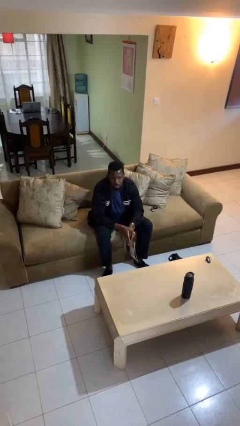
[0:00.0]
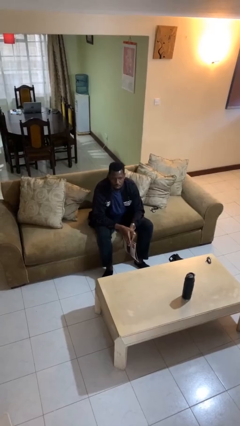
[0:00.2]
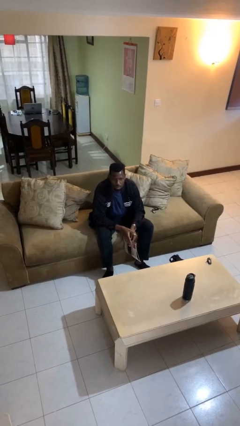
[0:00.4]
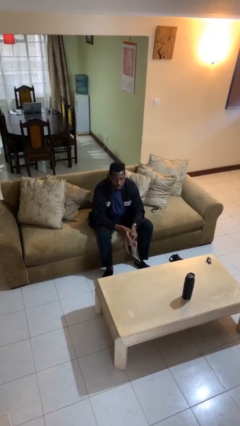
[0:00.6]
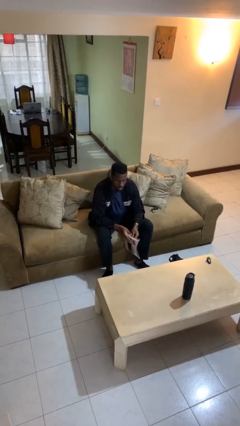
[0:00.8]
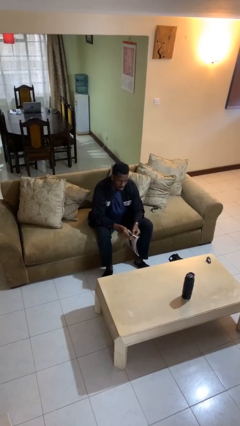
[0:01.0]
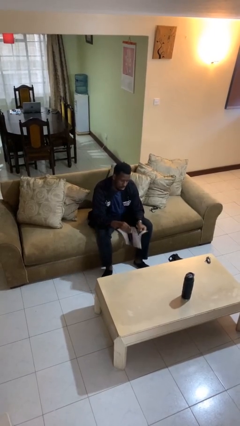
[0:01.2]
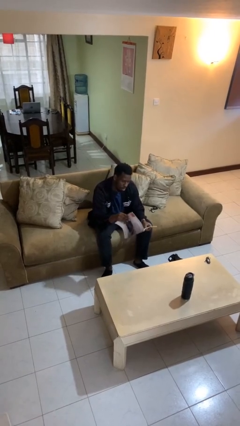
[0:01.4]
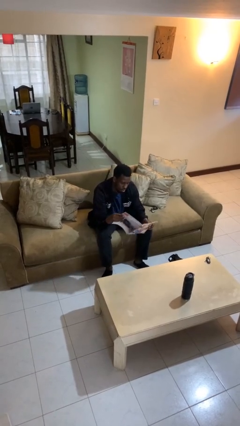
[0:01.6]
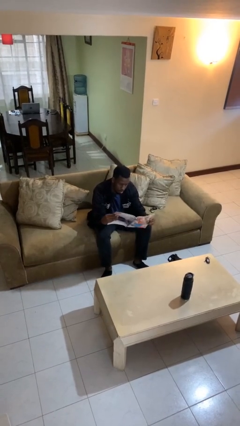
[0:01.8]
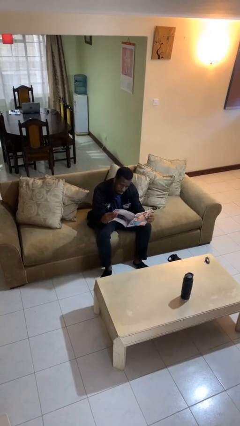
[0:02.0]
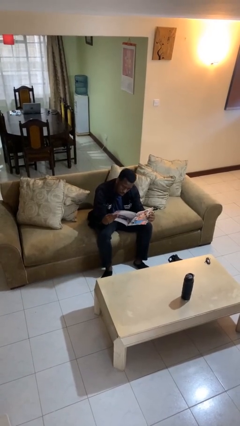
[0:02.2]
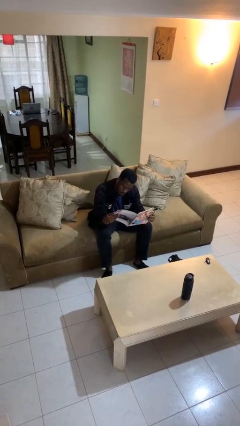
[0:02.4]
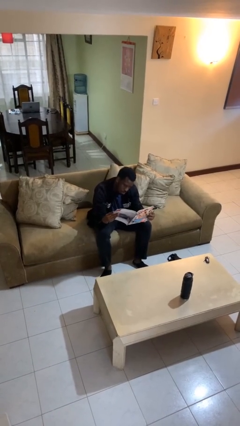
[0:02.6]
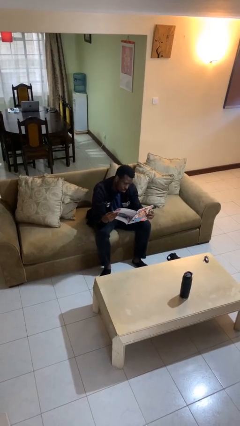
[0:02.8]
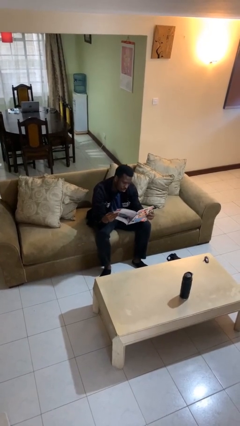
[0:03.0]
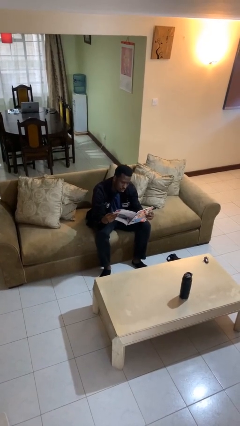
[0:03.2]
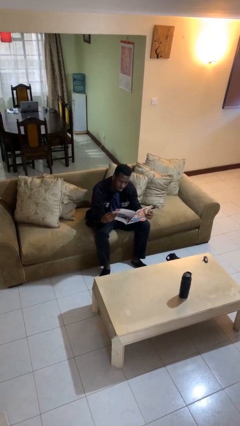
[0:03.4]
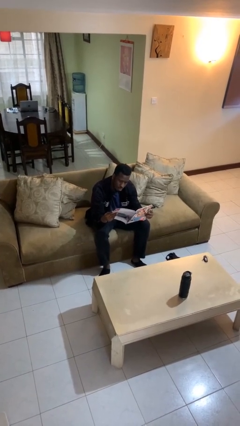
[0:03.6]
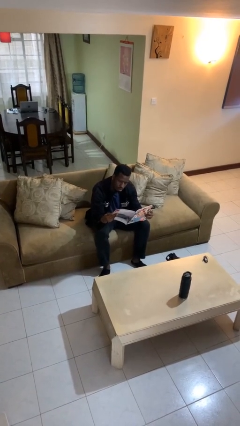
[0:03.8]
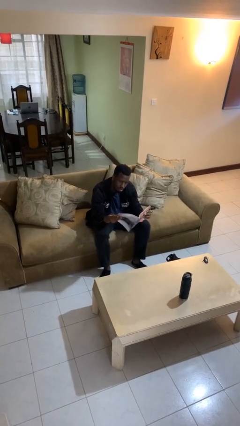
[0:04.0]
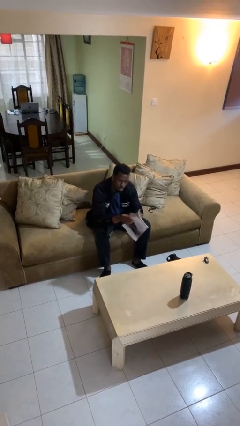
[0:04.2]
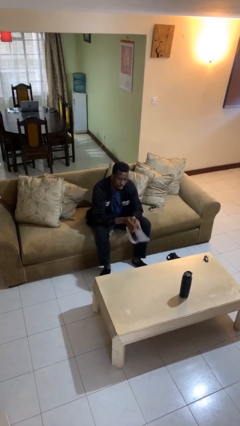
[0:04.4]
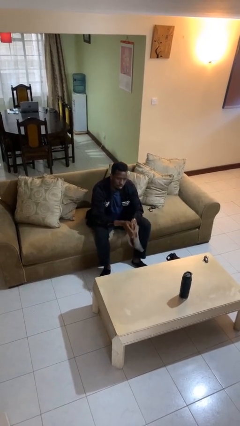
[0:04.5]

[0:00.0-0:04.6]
person reads magazine

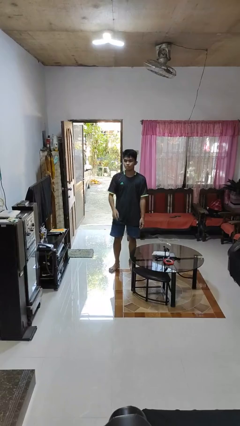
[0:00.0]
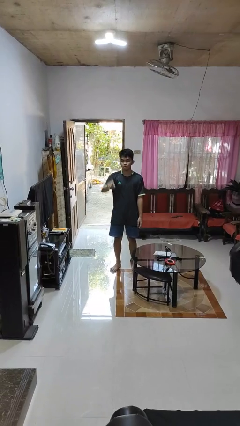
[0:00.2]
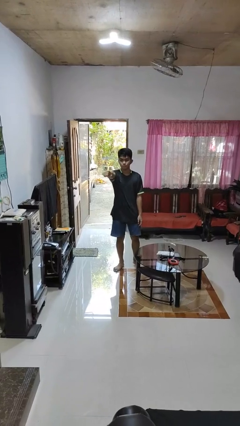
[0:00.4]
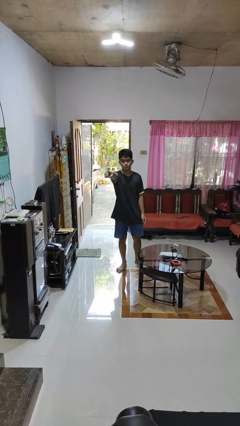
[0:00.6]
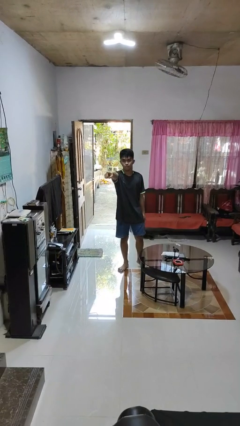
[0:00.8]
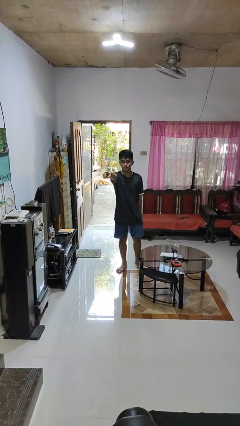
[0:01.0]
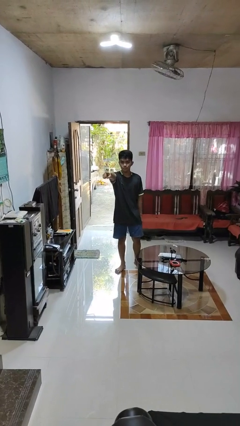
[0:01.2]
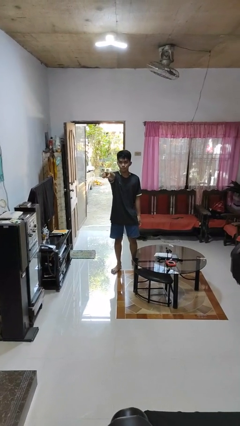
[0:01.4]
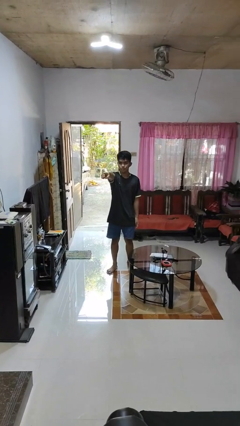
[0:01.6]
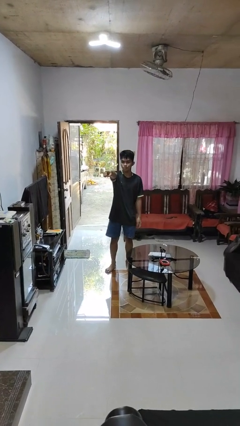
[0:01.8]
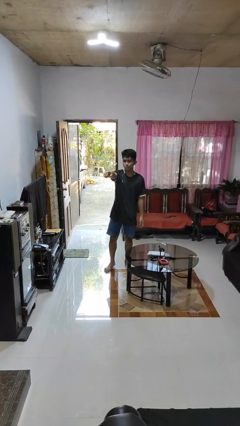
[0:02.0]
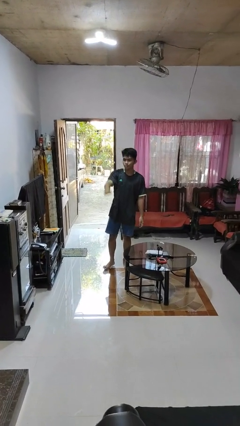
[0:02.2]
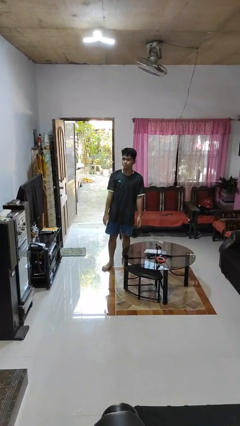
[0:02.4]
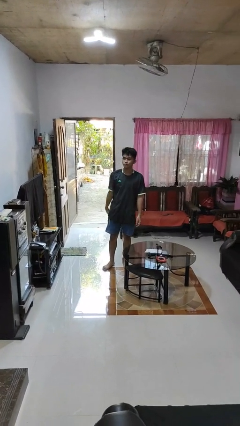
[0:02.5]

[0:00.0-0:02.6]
person points at person

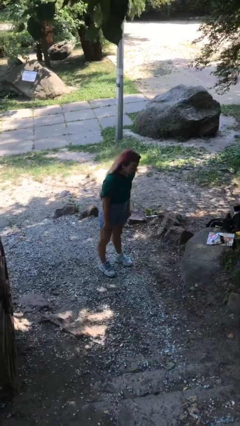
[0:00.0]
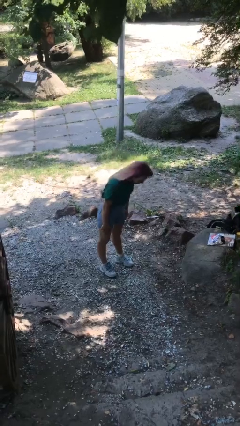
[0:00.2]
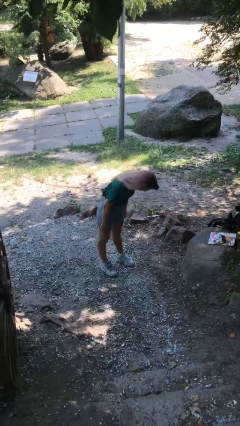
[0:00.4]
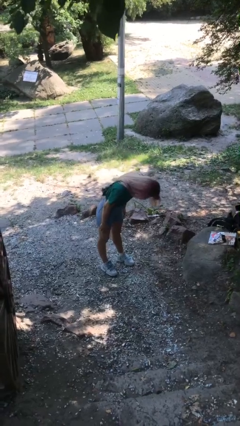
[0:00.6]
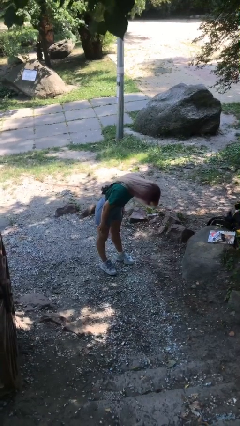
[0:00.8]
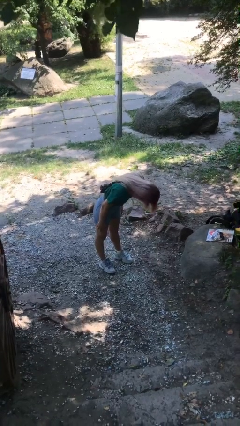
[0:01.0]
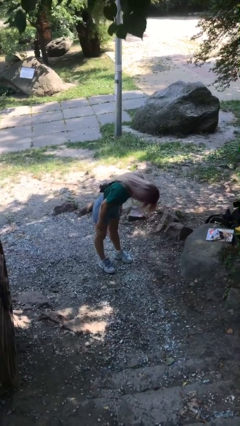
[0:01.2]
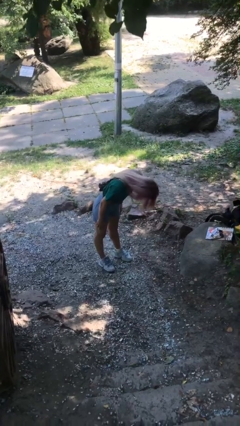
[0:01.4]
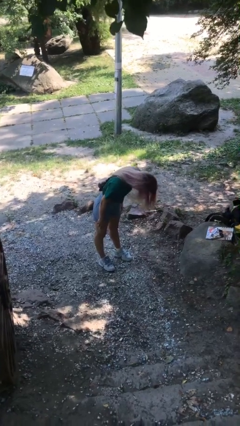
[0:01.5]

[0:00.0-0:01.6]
person bows

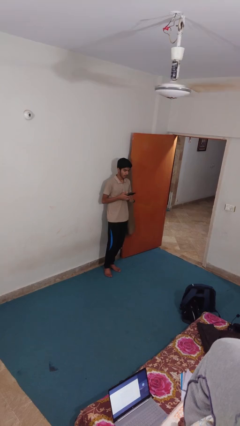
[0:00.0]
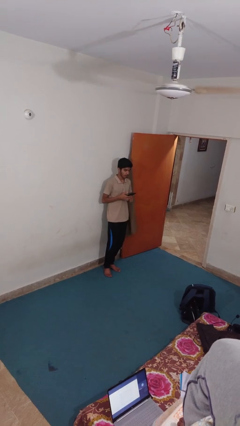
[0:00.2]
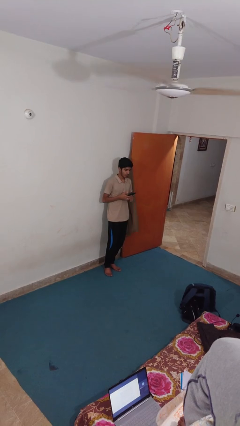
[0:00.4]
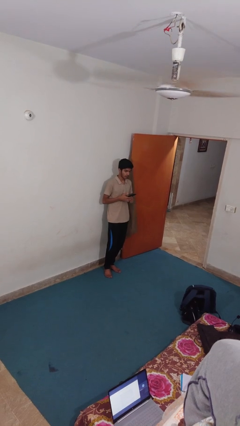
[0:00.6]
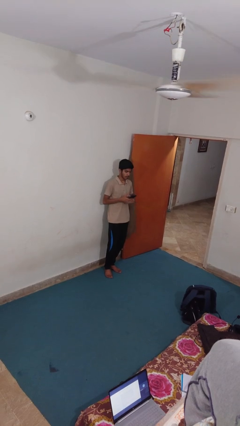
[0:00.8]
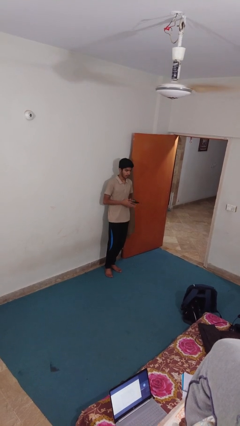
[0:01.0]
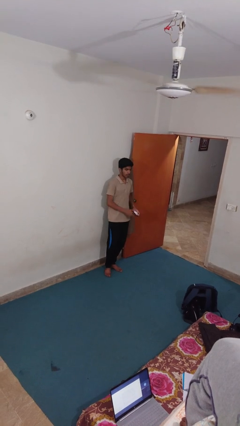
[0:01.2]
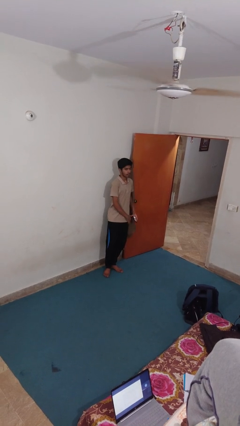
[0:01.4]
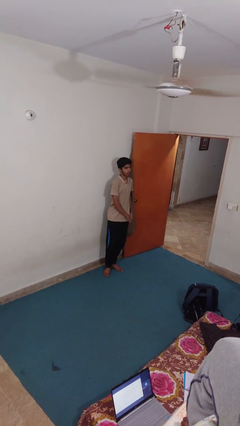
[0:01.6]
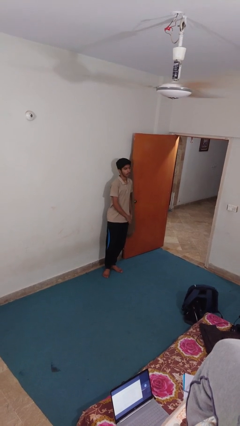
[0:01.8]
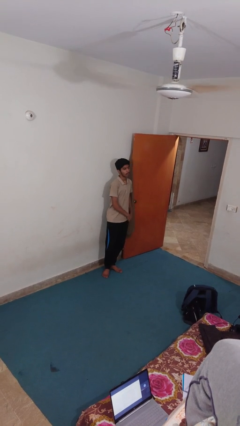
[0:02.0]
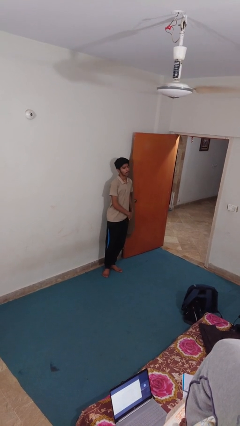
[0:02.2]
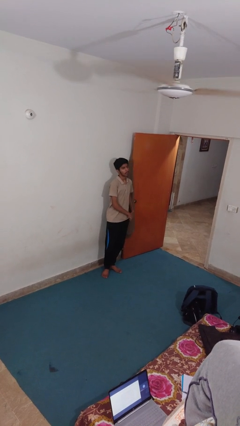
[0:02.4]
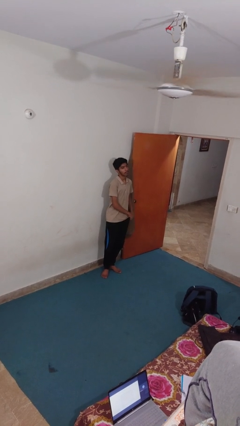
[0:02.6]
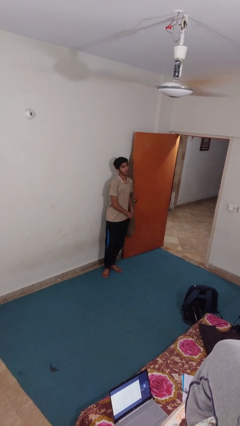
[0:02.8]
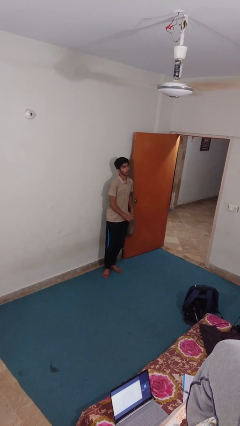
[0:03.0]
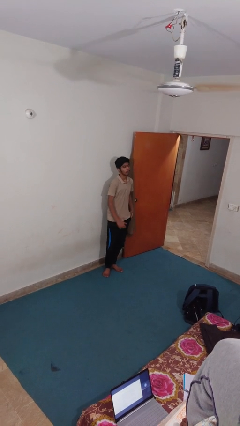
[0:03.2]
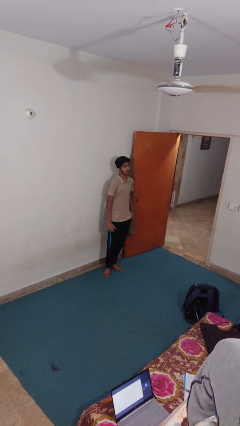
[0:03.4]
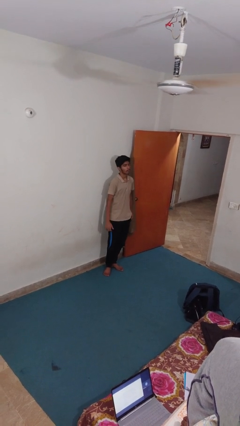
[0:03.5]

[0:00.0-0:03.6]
person puts phone into pocket

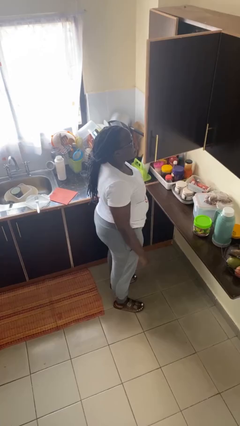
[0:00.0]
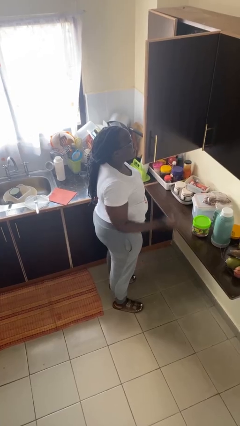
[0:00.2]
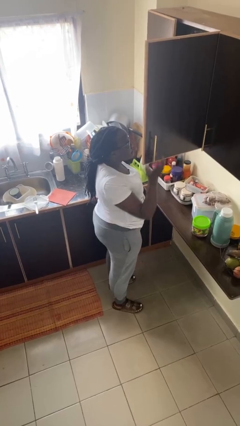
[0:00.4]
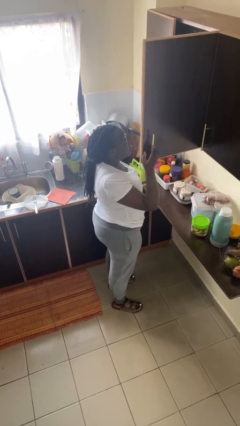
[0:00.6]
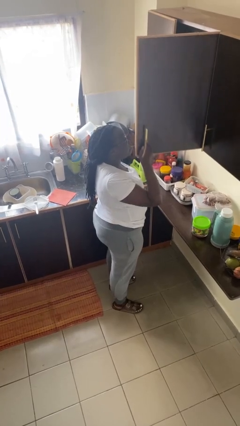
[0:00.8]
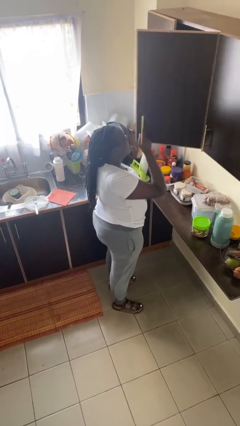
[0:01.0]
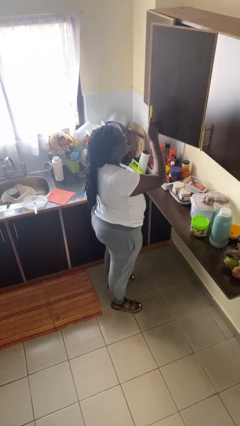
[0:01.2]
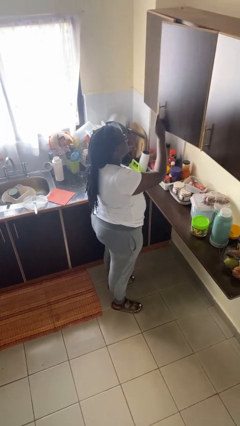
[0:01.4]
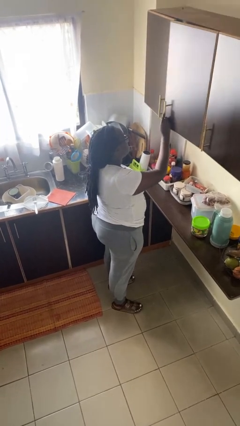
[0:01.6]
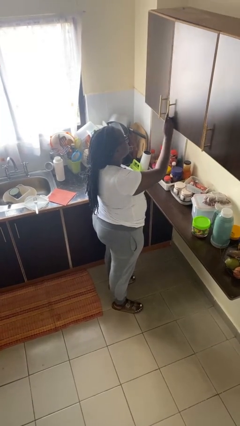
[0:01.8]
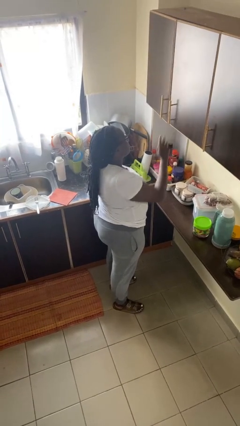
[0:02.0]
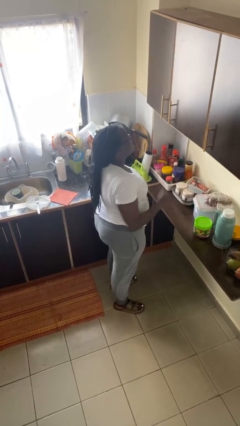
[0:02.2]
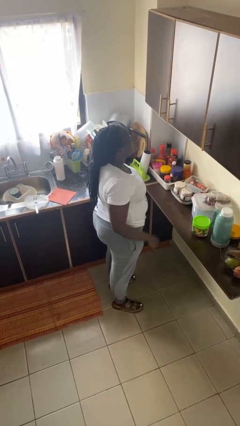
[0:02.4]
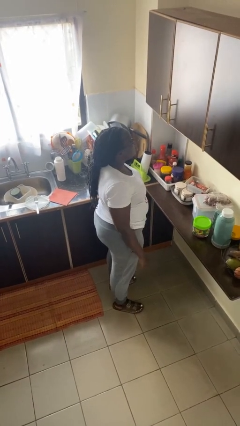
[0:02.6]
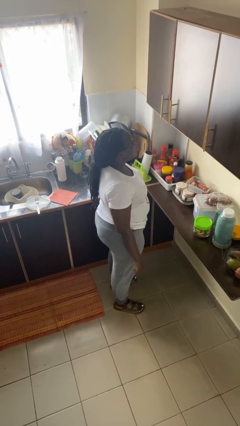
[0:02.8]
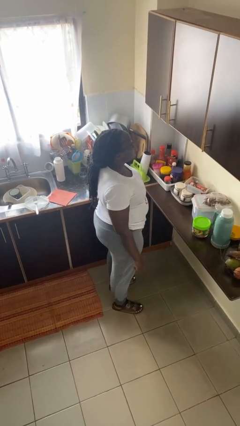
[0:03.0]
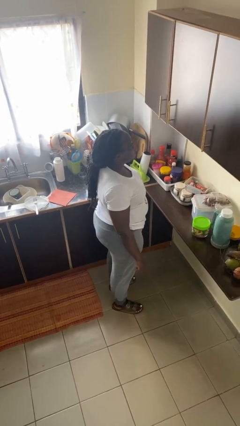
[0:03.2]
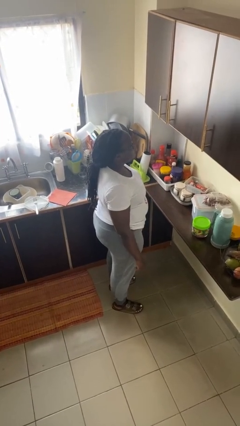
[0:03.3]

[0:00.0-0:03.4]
person closes cabinet

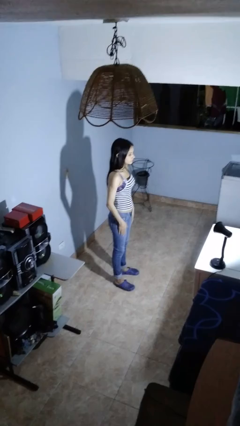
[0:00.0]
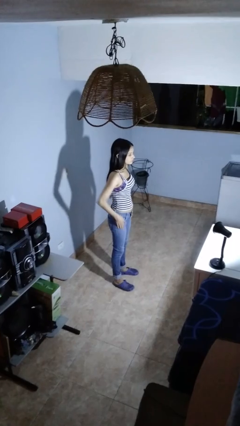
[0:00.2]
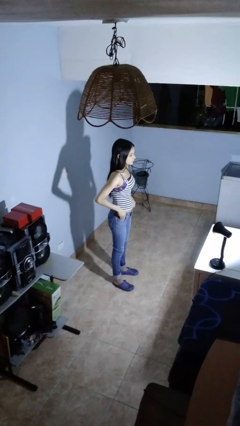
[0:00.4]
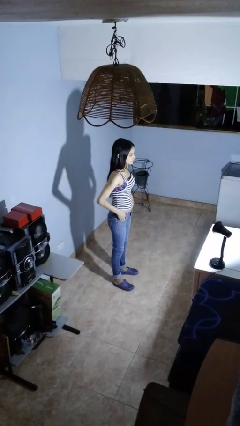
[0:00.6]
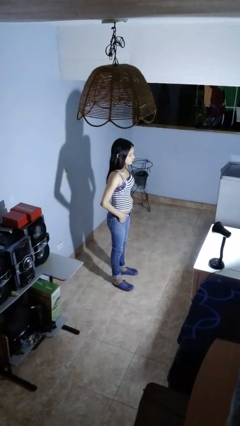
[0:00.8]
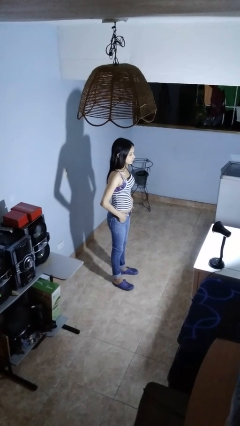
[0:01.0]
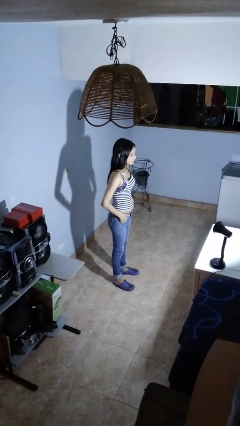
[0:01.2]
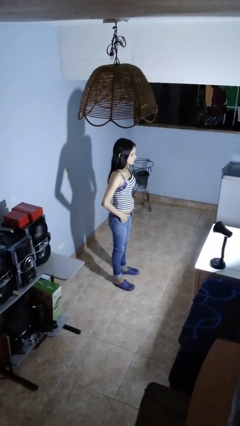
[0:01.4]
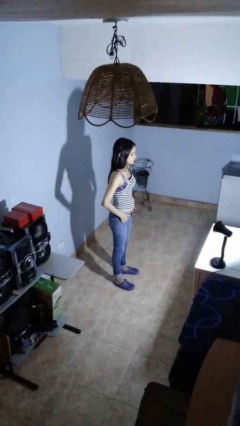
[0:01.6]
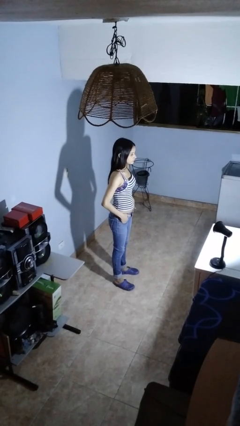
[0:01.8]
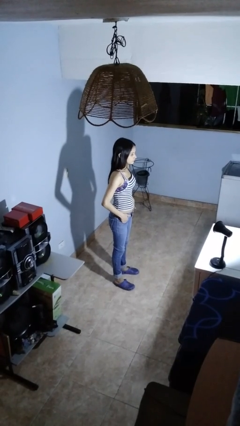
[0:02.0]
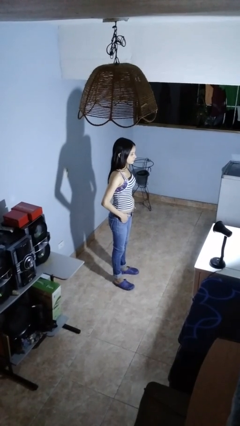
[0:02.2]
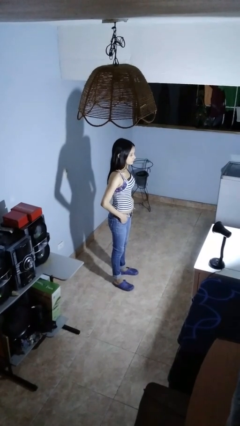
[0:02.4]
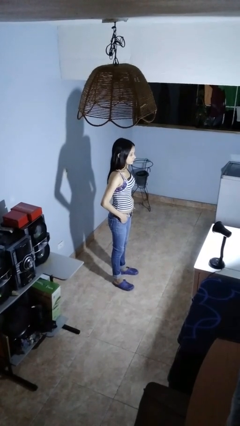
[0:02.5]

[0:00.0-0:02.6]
person puts hands in back pockets
